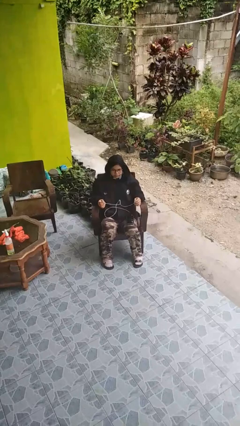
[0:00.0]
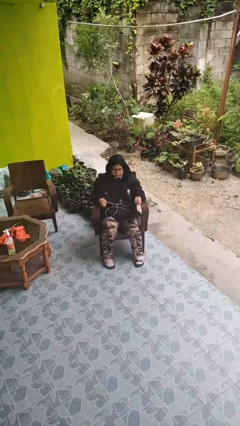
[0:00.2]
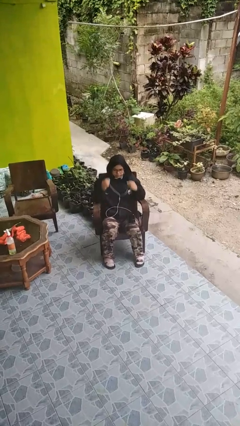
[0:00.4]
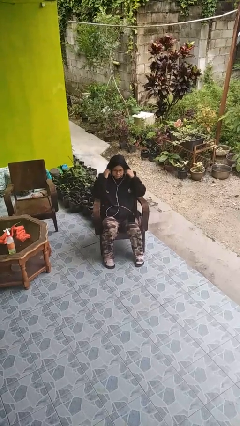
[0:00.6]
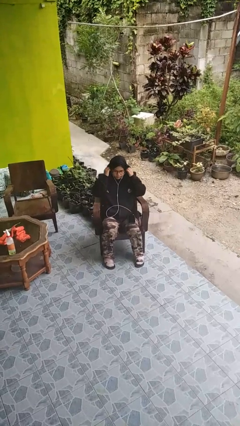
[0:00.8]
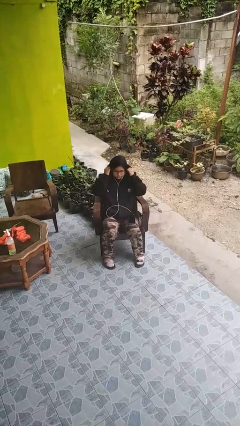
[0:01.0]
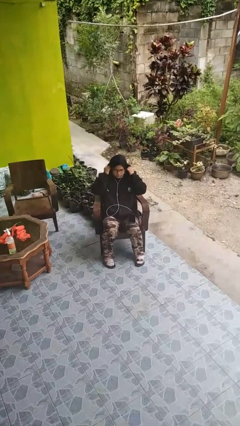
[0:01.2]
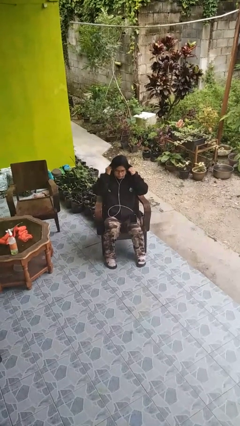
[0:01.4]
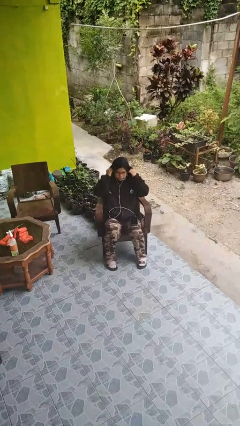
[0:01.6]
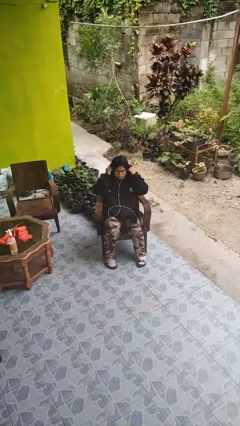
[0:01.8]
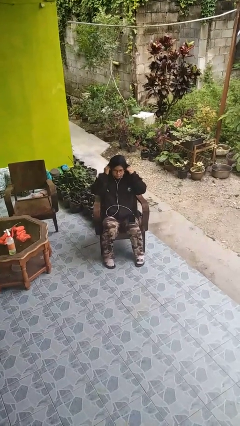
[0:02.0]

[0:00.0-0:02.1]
person puts on headphones

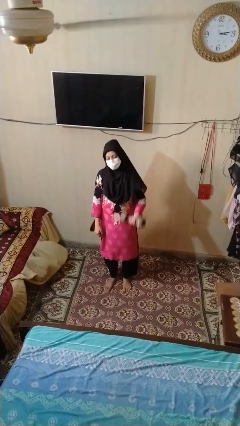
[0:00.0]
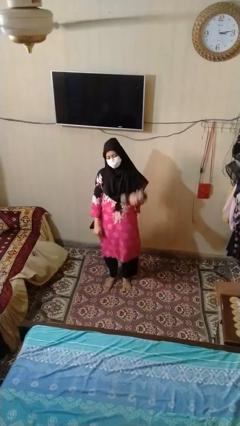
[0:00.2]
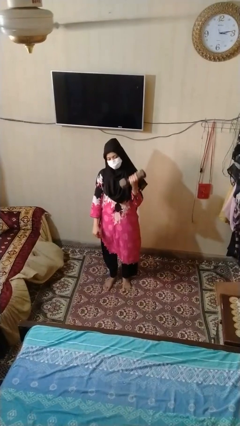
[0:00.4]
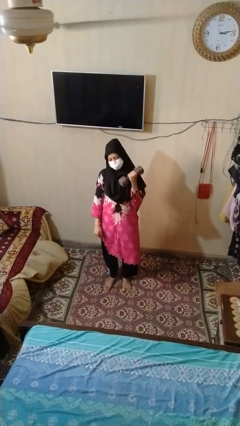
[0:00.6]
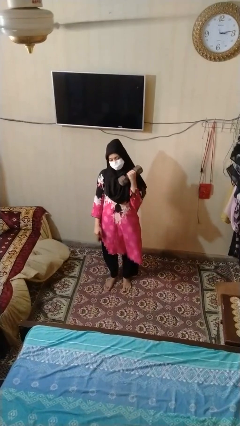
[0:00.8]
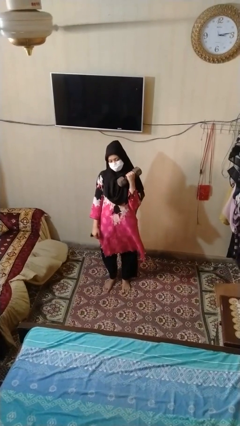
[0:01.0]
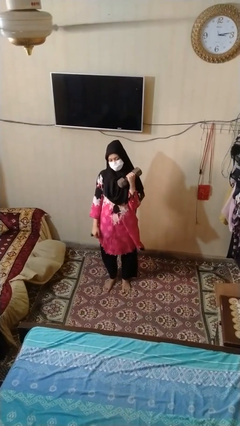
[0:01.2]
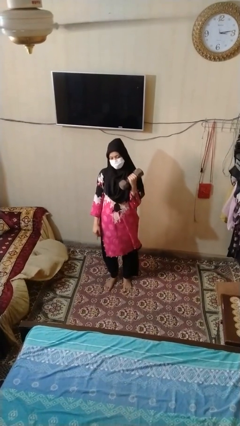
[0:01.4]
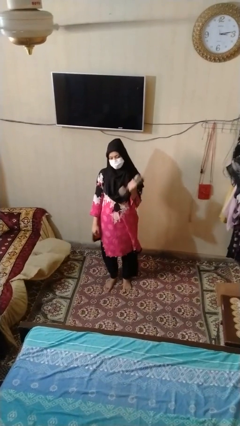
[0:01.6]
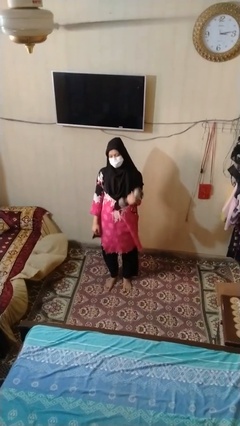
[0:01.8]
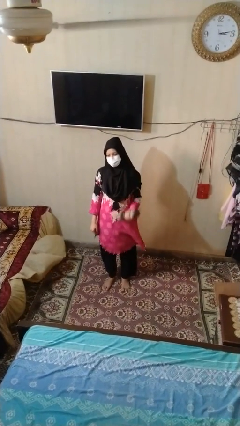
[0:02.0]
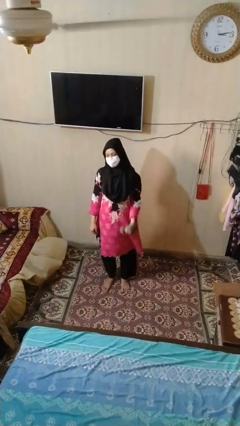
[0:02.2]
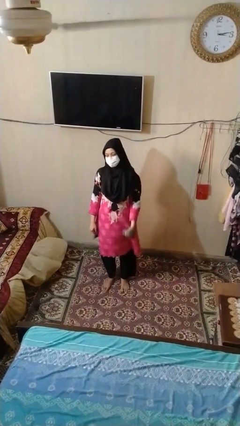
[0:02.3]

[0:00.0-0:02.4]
person lifts dumbbells

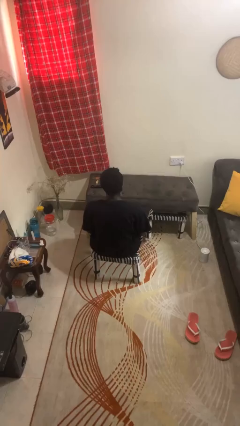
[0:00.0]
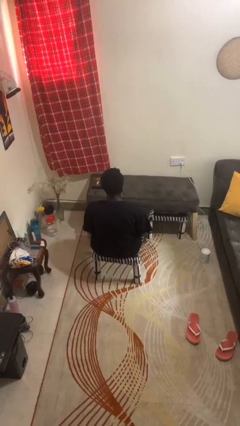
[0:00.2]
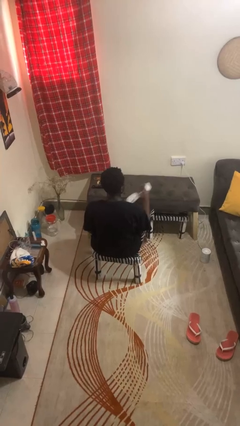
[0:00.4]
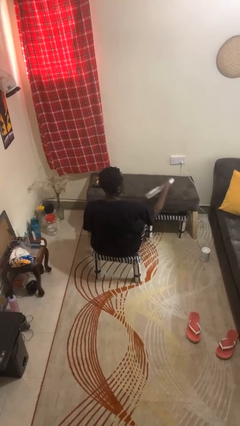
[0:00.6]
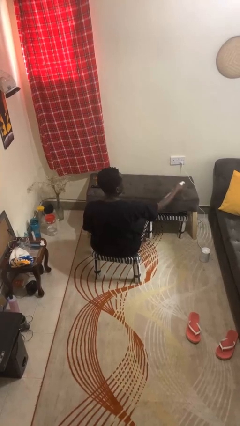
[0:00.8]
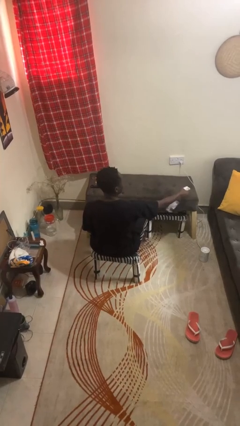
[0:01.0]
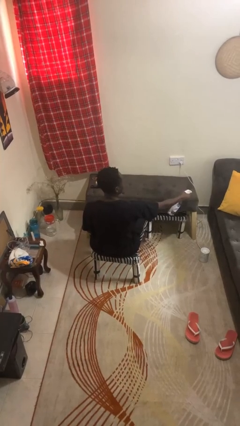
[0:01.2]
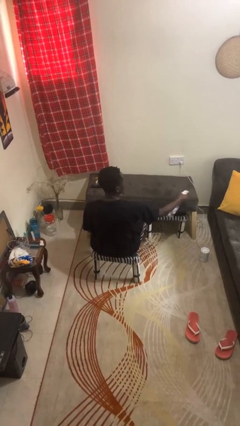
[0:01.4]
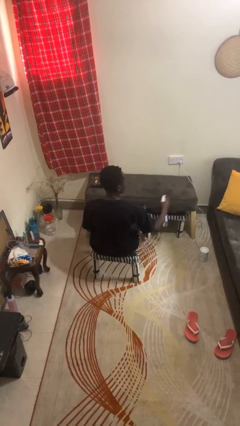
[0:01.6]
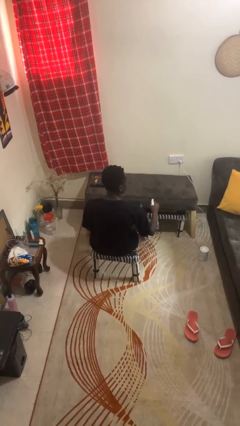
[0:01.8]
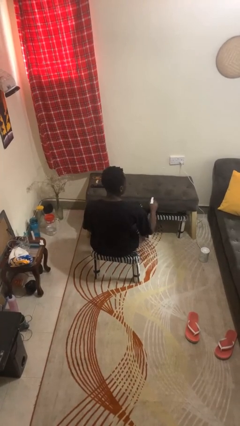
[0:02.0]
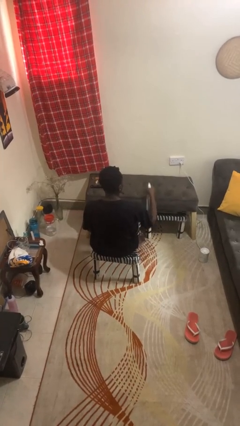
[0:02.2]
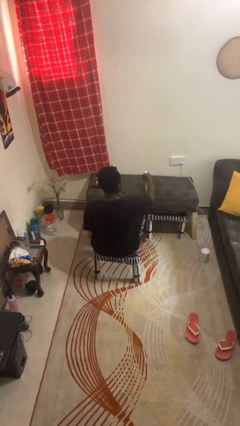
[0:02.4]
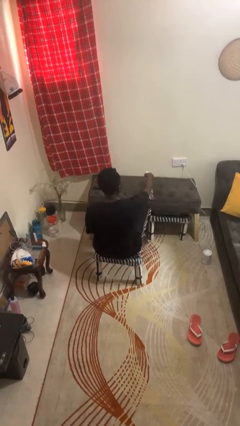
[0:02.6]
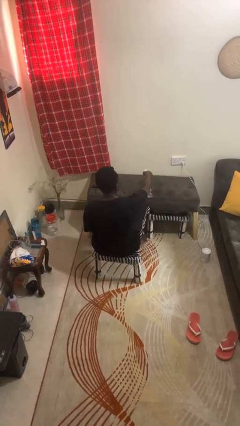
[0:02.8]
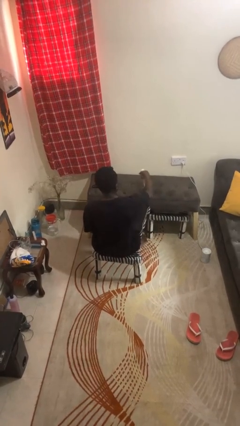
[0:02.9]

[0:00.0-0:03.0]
person sprays from bottle

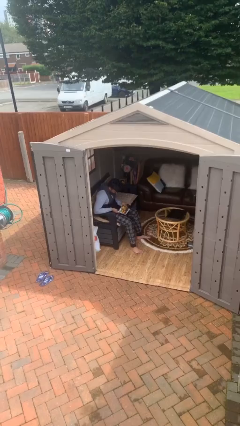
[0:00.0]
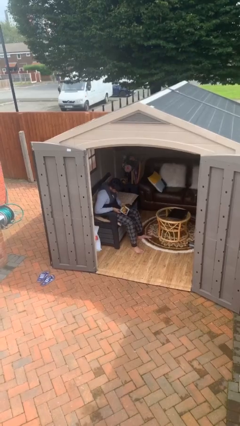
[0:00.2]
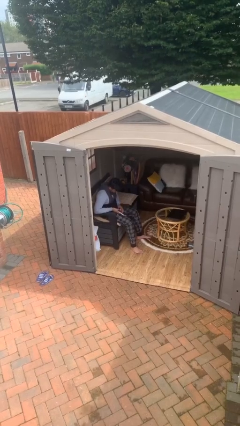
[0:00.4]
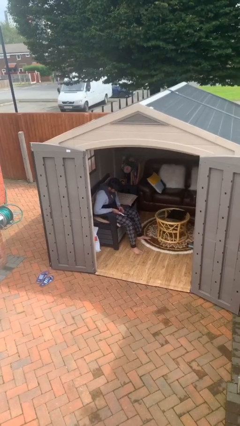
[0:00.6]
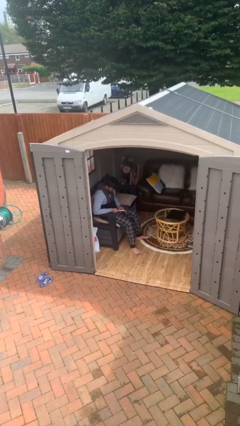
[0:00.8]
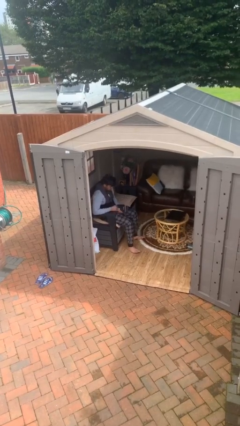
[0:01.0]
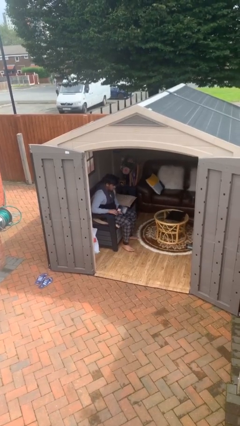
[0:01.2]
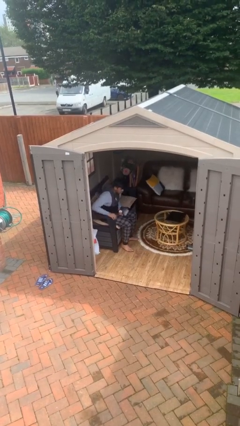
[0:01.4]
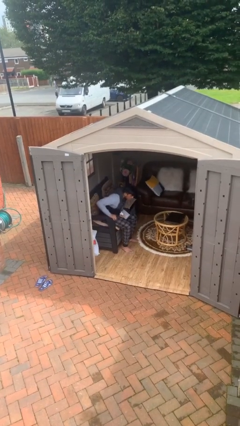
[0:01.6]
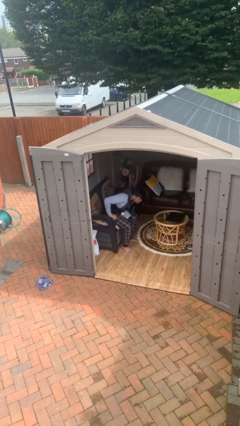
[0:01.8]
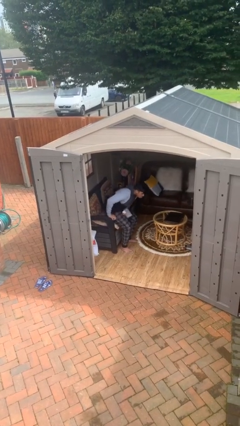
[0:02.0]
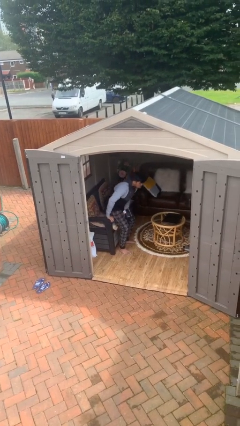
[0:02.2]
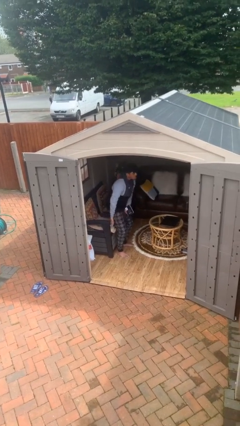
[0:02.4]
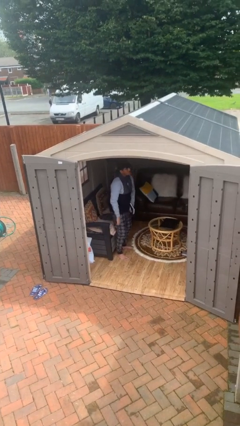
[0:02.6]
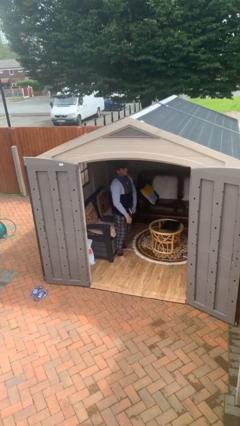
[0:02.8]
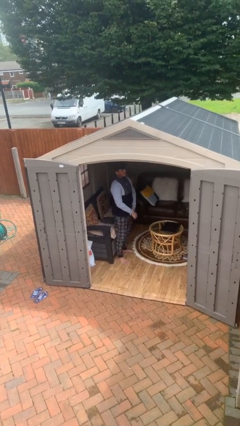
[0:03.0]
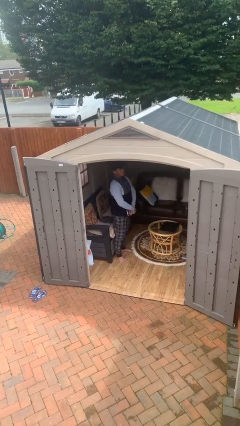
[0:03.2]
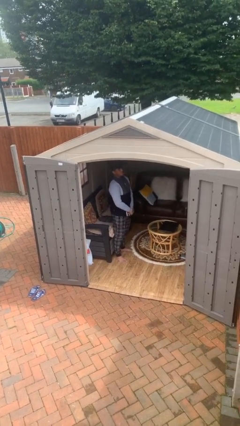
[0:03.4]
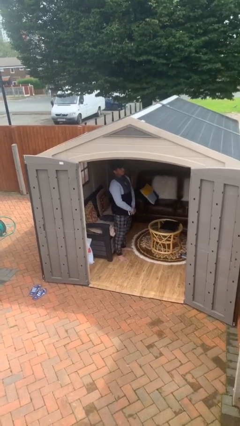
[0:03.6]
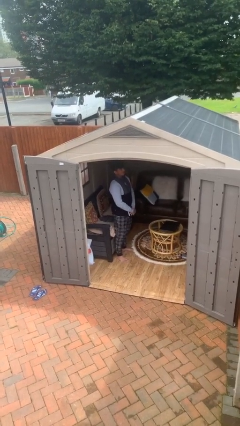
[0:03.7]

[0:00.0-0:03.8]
person stands up

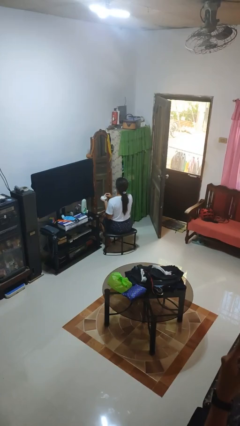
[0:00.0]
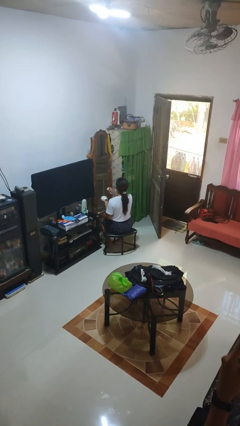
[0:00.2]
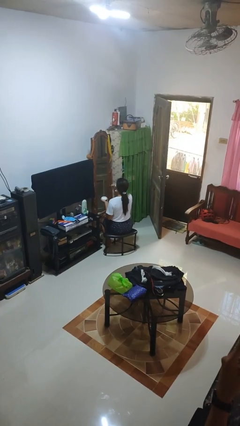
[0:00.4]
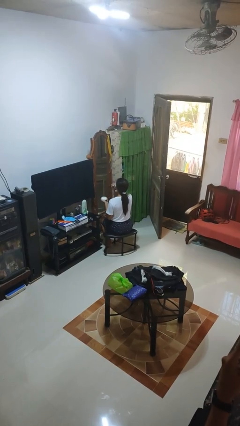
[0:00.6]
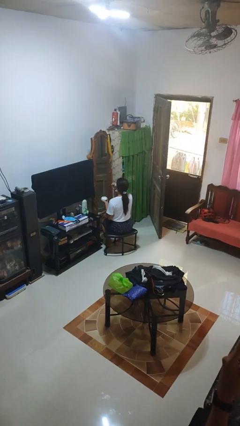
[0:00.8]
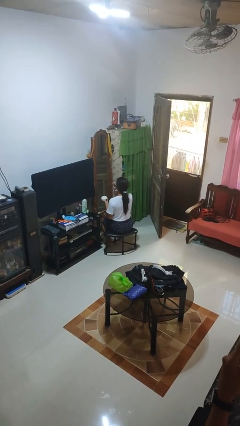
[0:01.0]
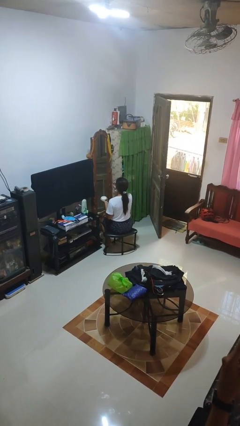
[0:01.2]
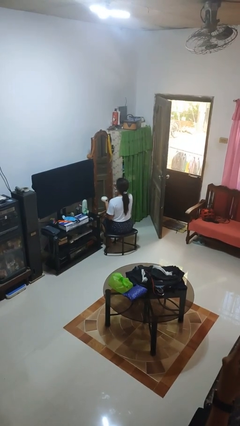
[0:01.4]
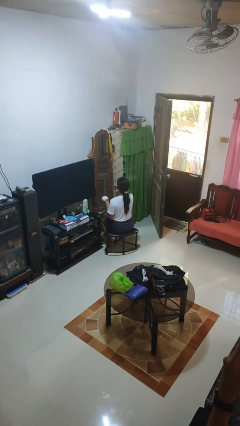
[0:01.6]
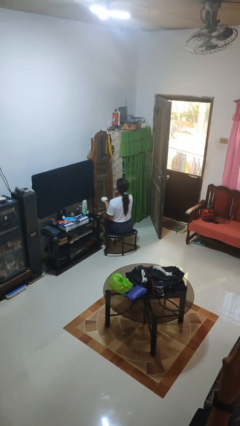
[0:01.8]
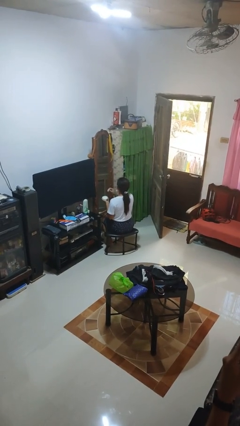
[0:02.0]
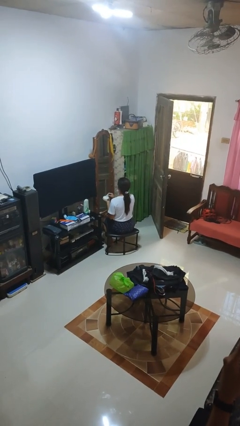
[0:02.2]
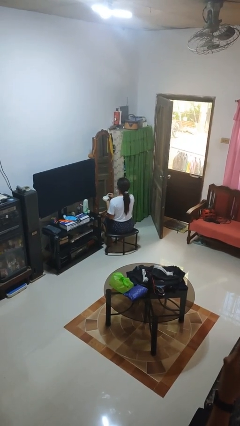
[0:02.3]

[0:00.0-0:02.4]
person applies foundation makeup

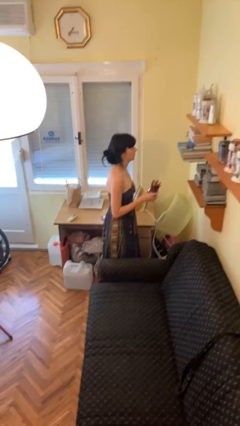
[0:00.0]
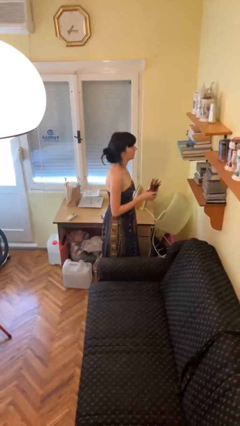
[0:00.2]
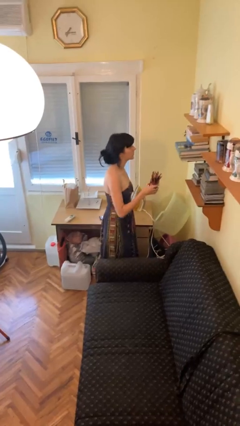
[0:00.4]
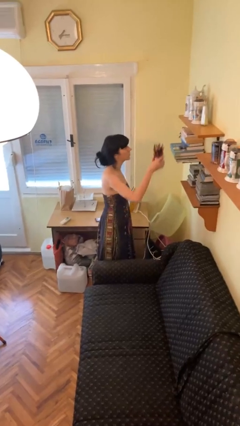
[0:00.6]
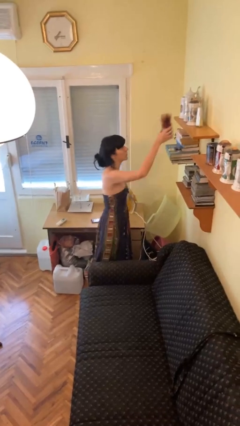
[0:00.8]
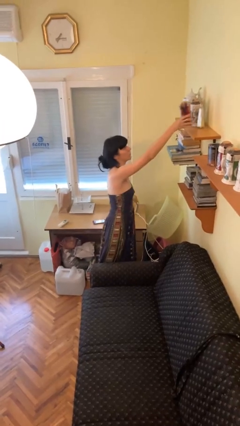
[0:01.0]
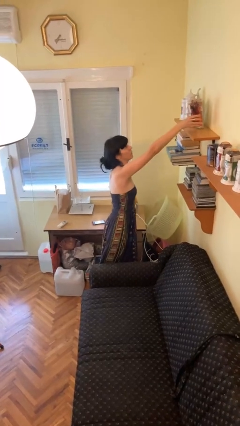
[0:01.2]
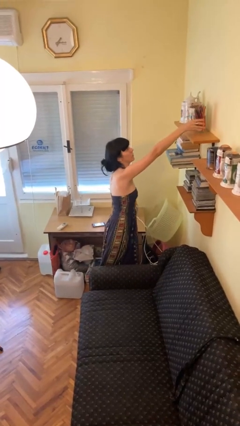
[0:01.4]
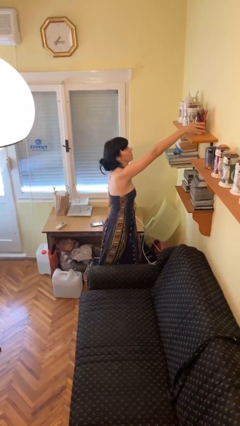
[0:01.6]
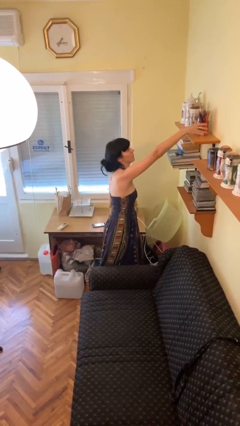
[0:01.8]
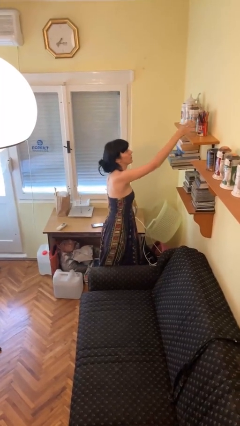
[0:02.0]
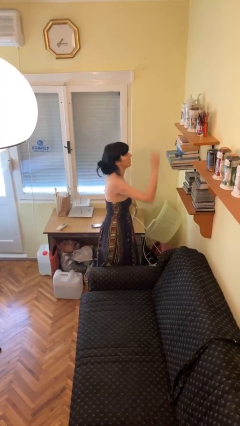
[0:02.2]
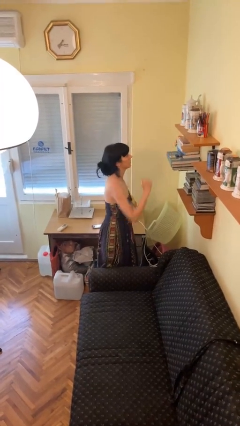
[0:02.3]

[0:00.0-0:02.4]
person puts down object on shelf

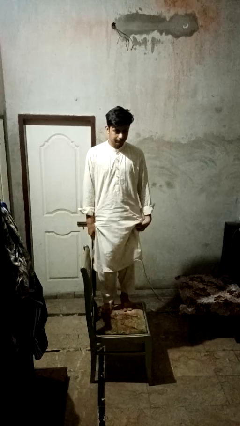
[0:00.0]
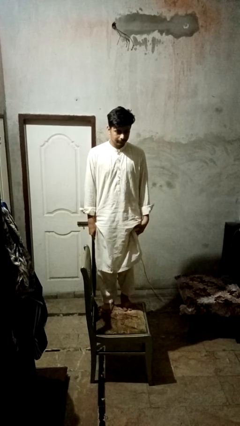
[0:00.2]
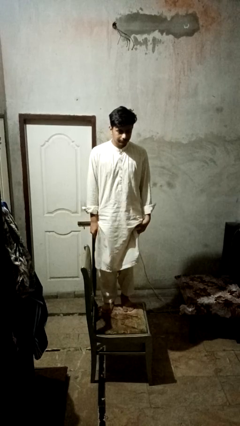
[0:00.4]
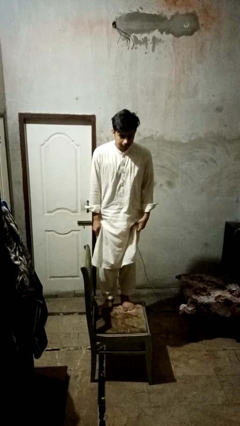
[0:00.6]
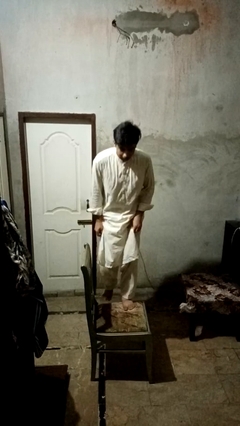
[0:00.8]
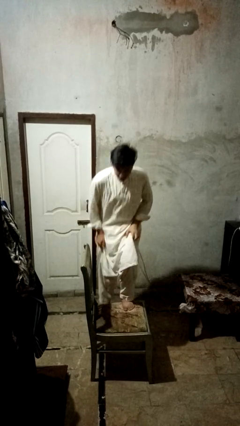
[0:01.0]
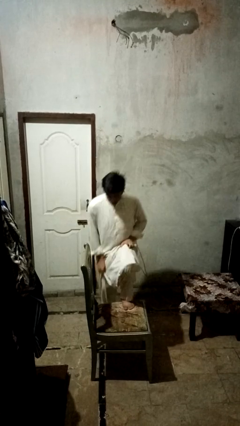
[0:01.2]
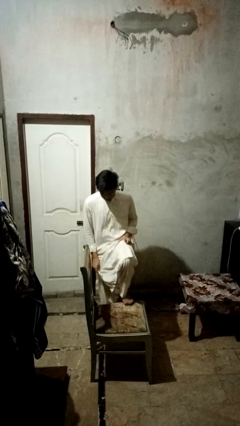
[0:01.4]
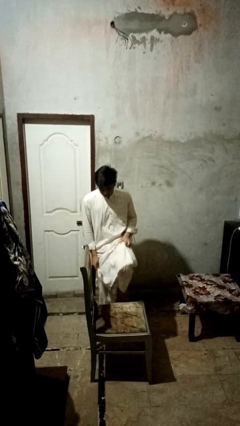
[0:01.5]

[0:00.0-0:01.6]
person climbs off chair
